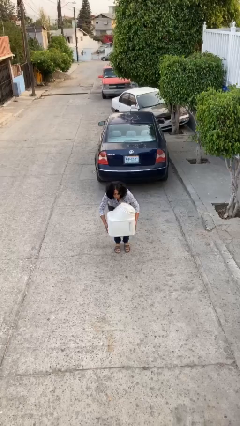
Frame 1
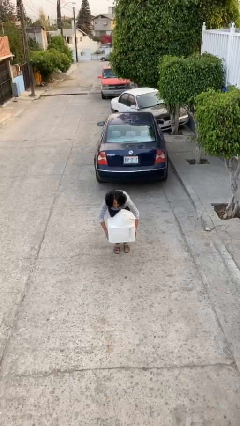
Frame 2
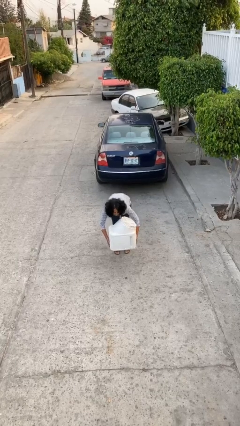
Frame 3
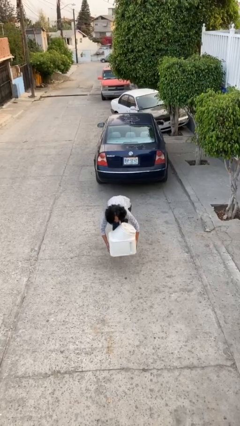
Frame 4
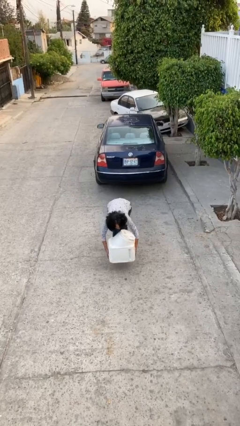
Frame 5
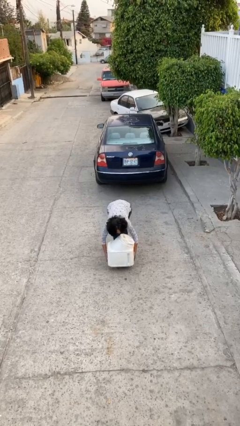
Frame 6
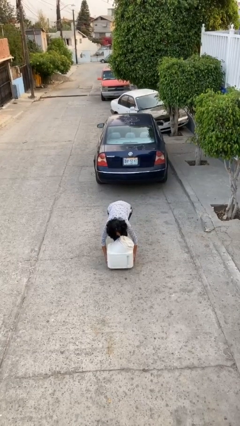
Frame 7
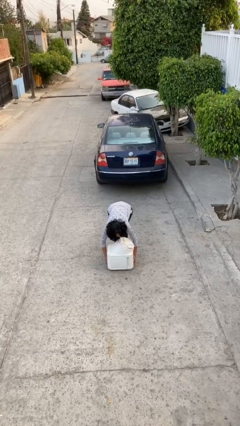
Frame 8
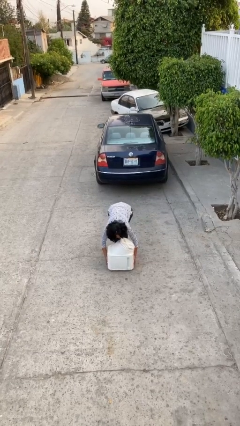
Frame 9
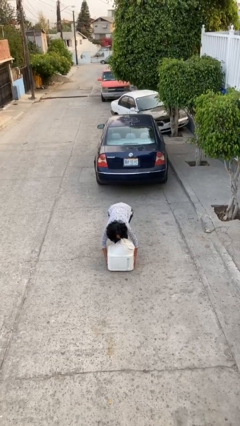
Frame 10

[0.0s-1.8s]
person puts down object on floor

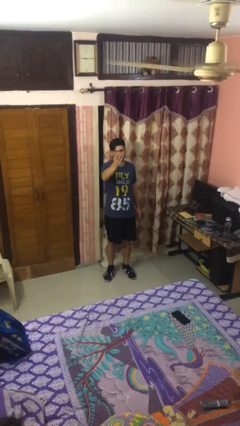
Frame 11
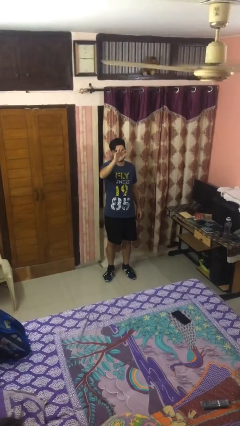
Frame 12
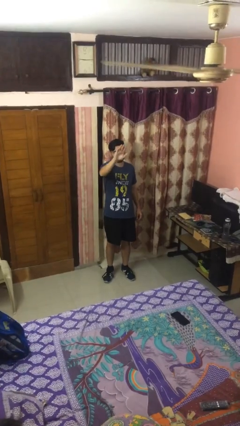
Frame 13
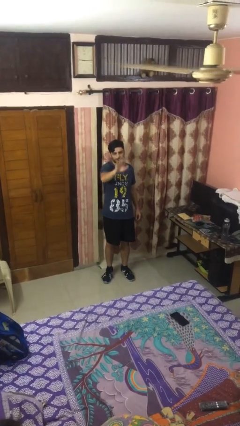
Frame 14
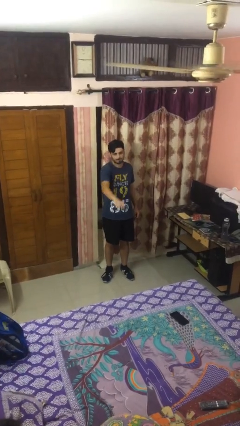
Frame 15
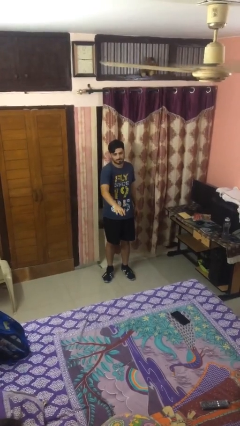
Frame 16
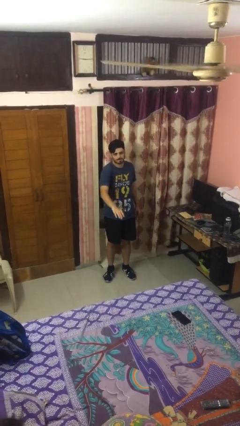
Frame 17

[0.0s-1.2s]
person gestures swipe down

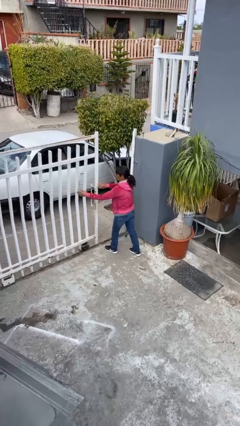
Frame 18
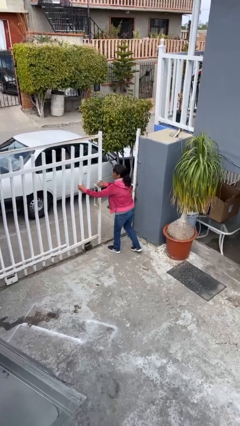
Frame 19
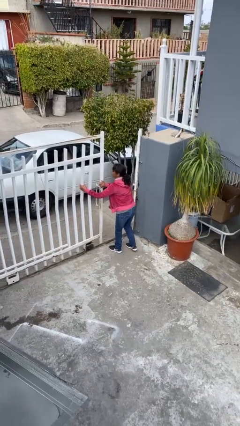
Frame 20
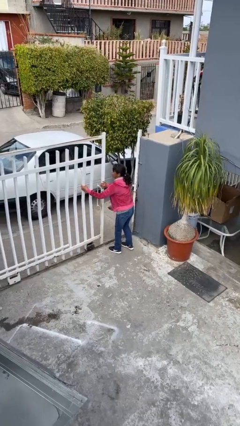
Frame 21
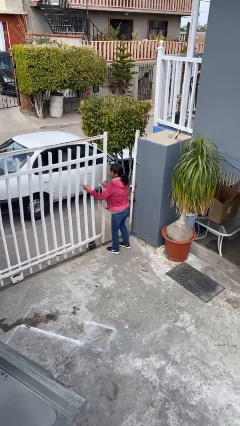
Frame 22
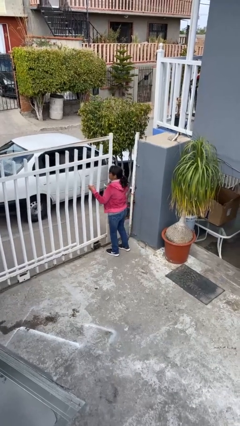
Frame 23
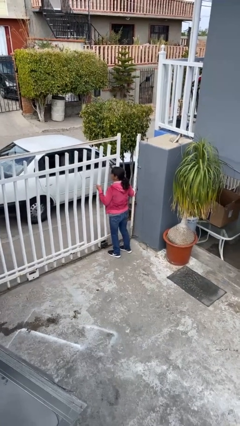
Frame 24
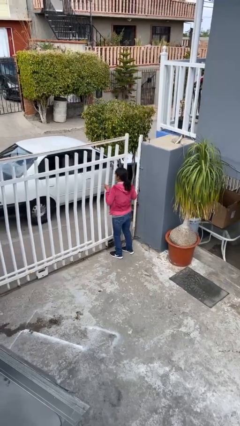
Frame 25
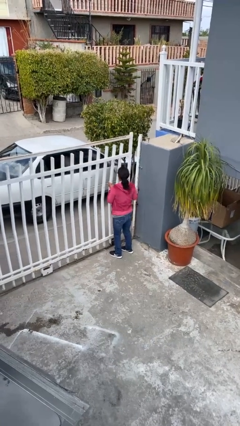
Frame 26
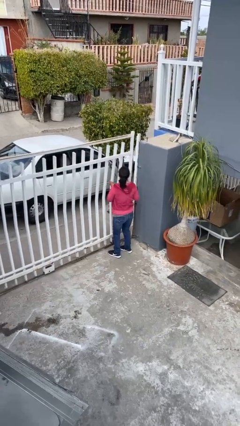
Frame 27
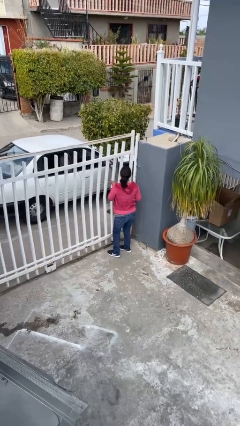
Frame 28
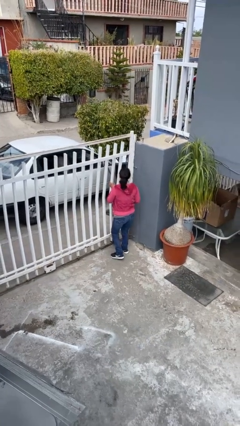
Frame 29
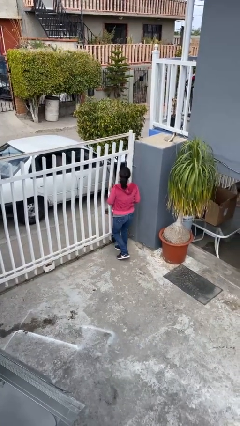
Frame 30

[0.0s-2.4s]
person closes facility door

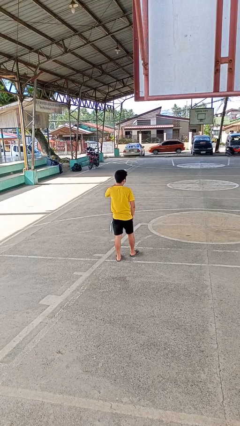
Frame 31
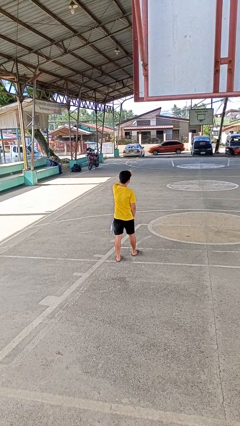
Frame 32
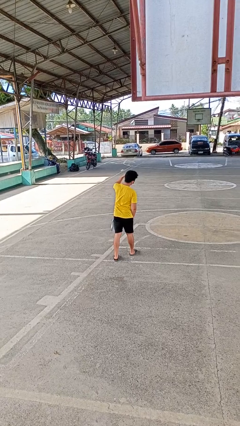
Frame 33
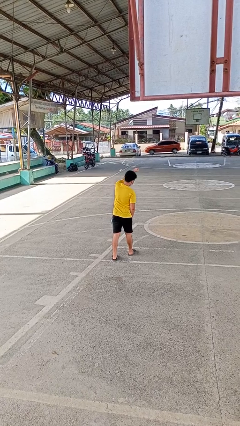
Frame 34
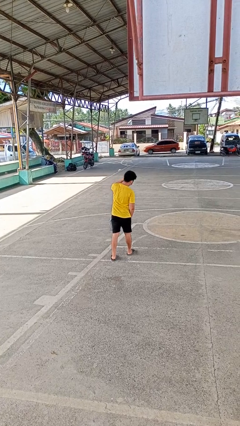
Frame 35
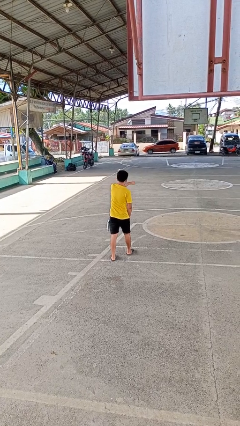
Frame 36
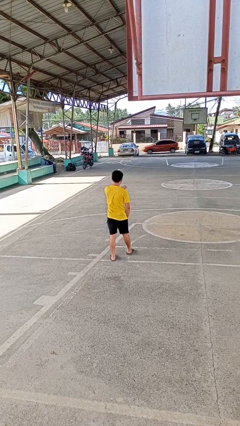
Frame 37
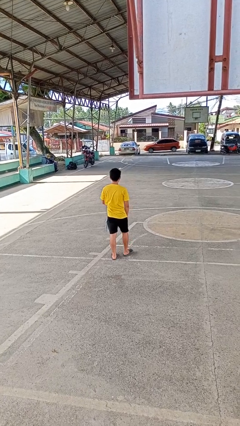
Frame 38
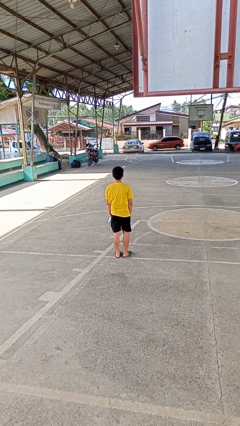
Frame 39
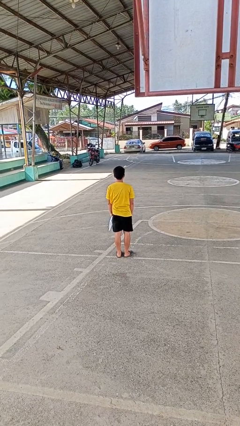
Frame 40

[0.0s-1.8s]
person punches

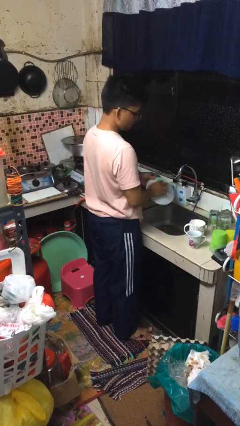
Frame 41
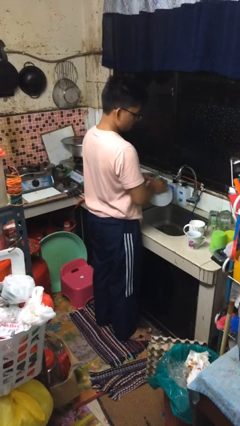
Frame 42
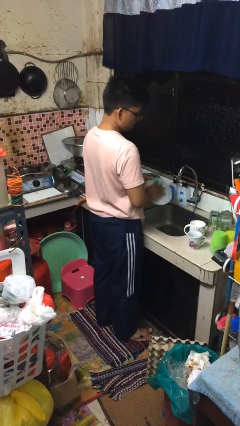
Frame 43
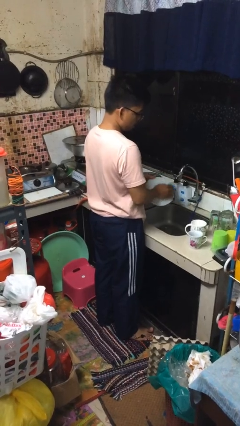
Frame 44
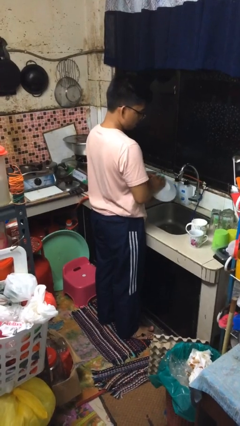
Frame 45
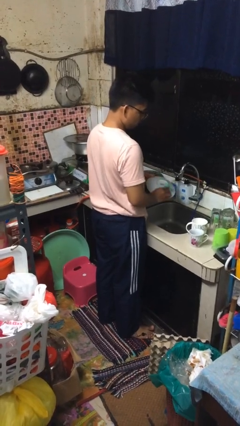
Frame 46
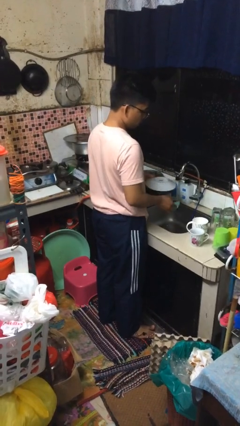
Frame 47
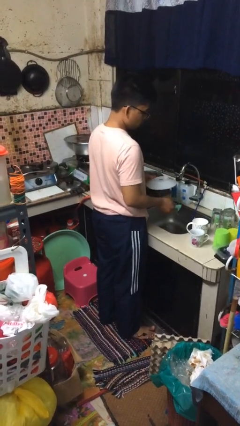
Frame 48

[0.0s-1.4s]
person washes dish

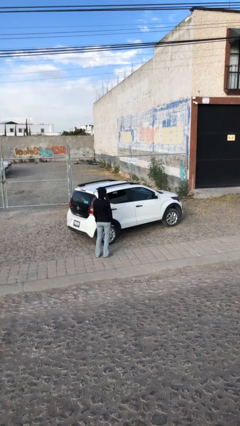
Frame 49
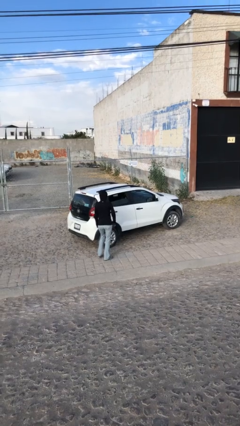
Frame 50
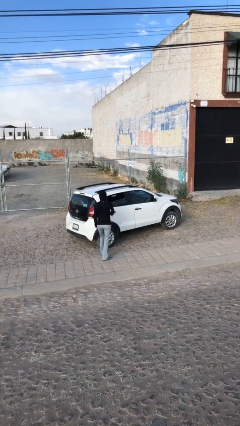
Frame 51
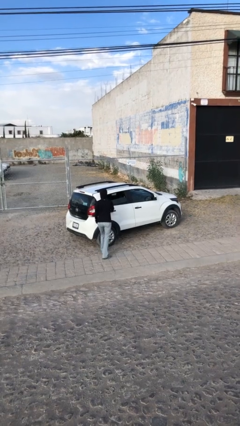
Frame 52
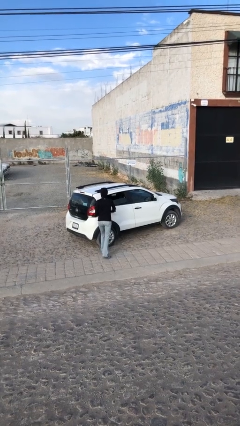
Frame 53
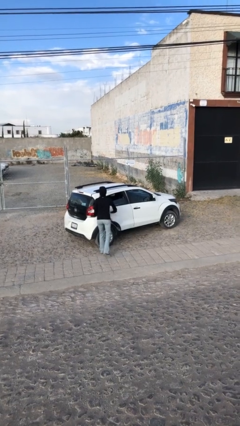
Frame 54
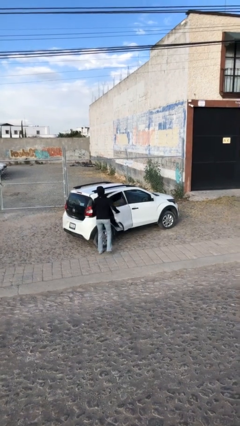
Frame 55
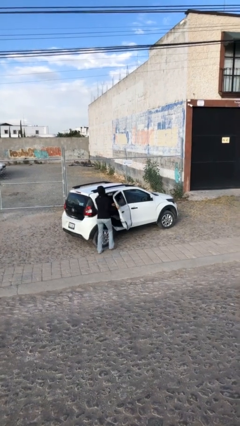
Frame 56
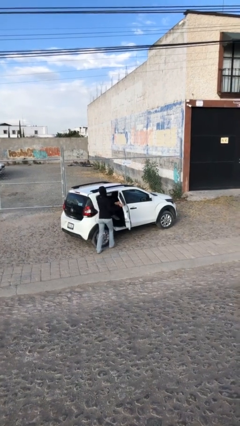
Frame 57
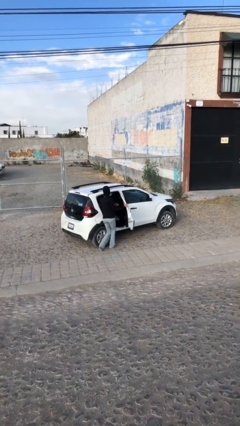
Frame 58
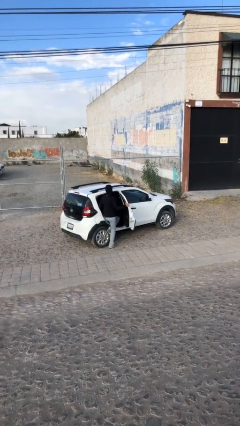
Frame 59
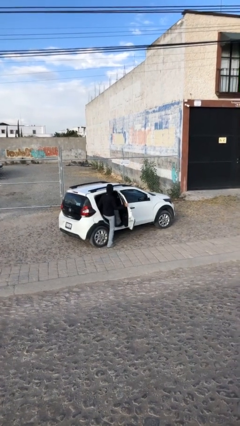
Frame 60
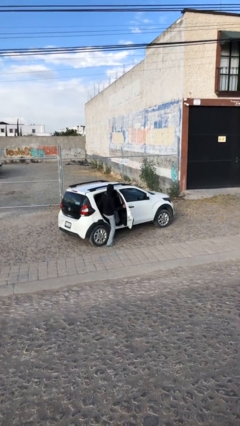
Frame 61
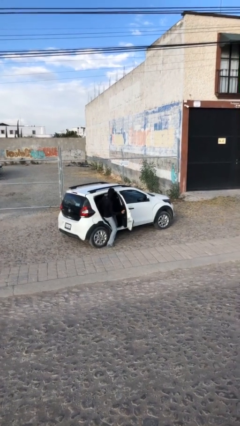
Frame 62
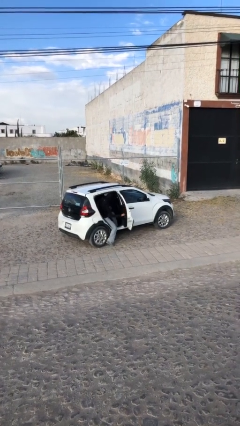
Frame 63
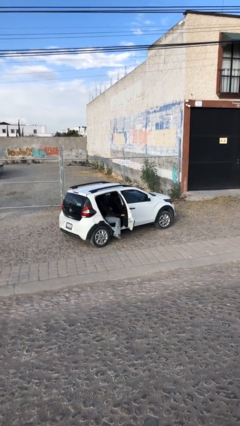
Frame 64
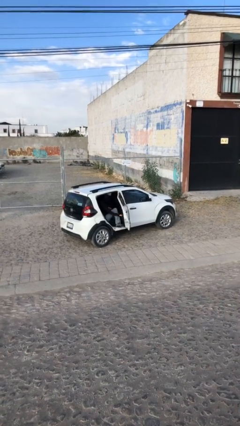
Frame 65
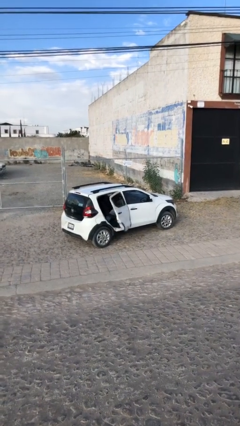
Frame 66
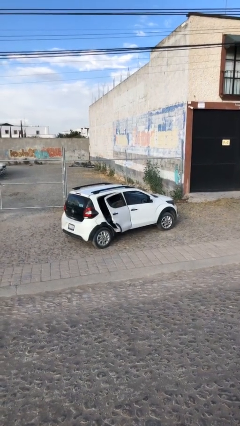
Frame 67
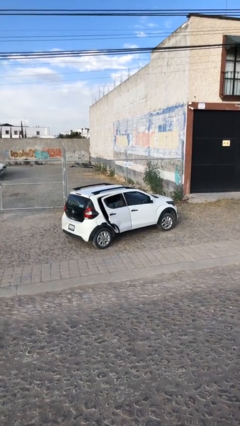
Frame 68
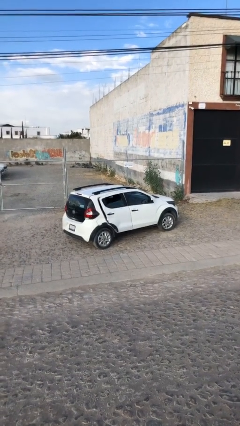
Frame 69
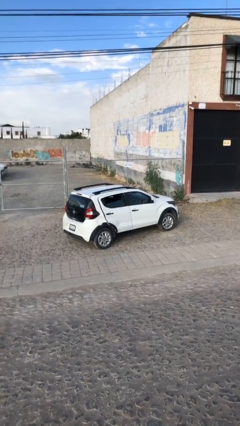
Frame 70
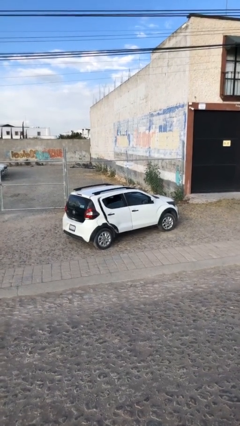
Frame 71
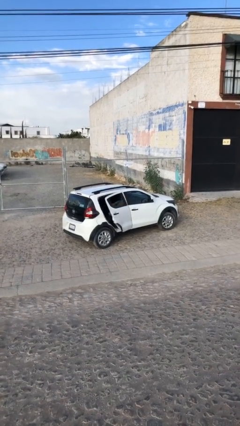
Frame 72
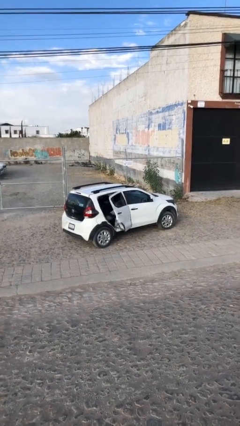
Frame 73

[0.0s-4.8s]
car picks up person

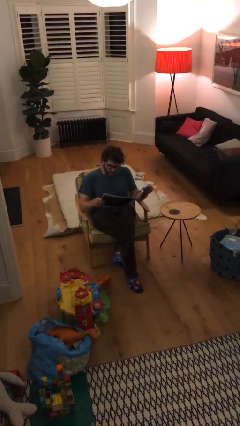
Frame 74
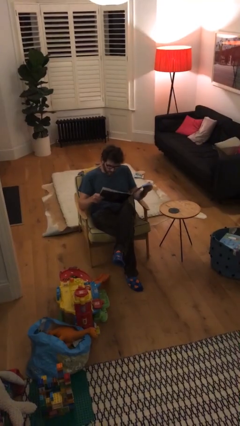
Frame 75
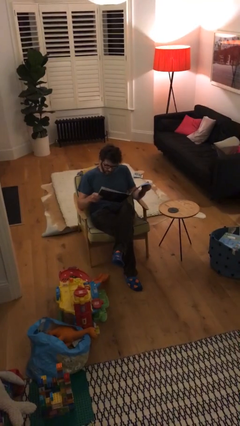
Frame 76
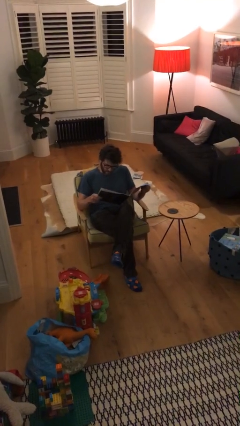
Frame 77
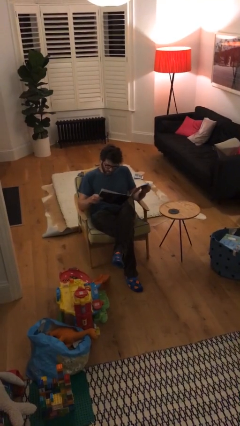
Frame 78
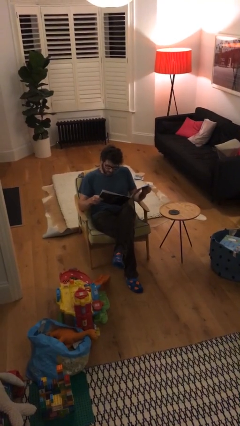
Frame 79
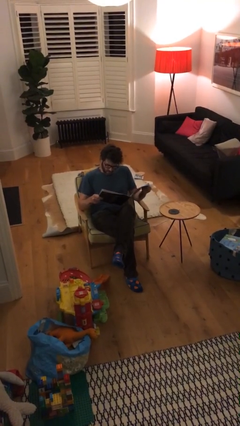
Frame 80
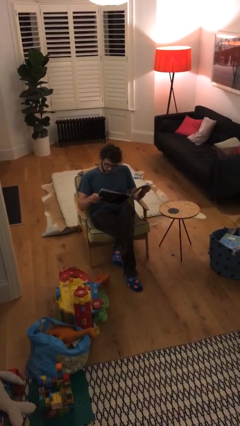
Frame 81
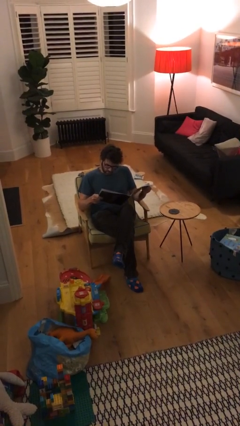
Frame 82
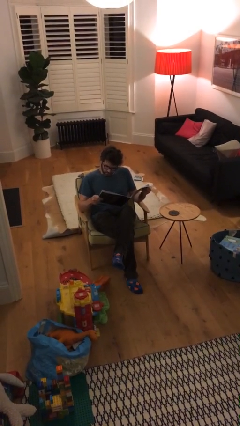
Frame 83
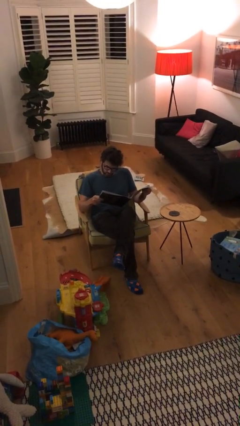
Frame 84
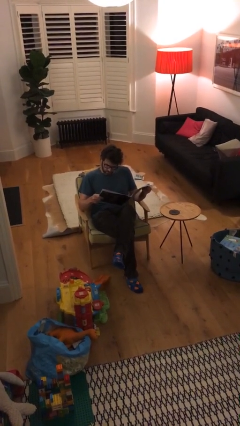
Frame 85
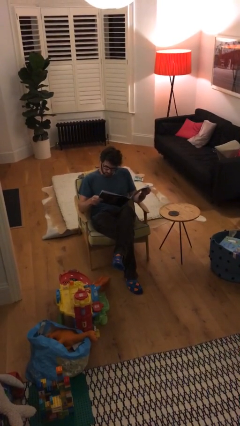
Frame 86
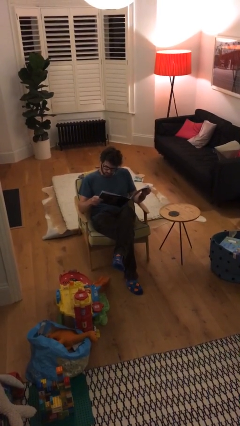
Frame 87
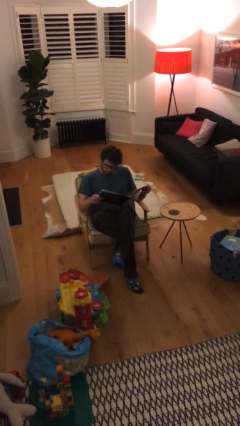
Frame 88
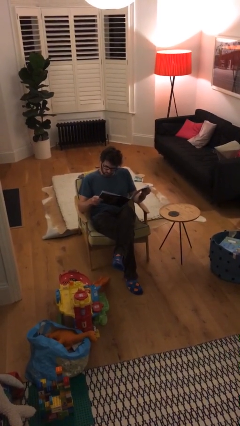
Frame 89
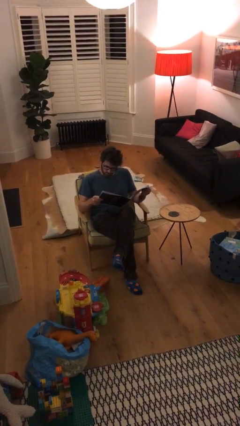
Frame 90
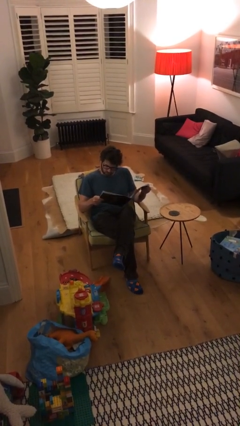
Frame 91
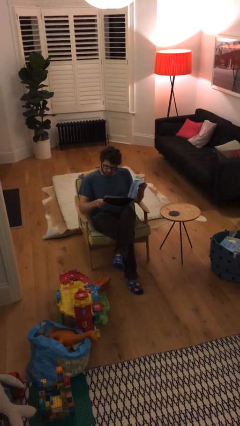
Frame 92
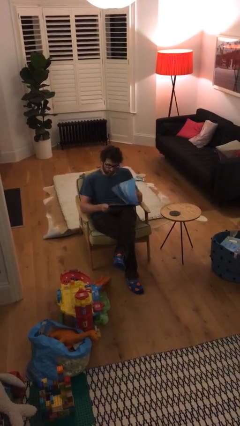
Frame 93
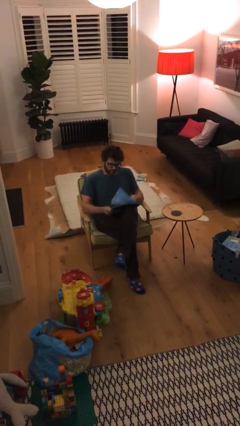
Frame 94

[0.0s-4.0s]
person reads document
